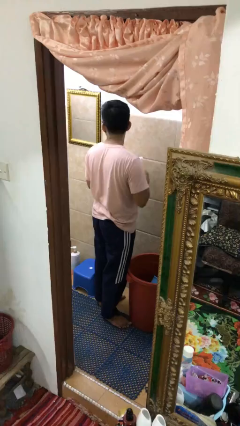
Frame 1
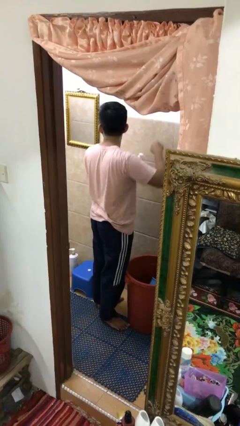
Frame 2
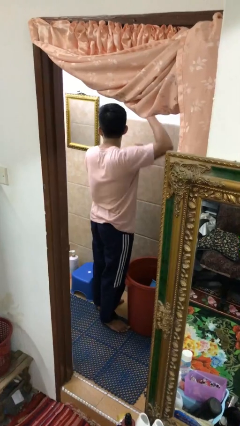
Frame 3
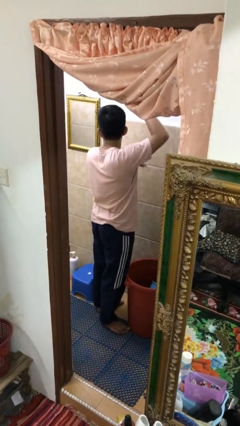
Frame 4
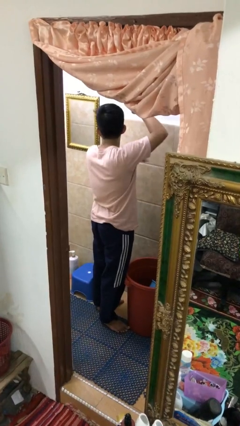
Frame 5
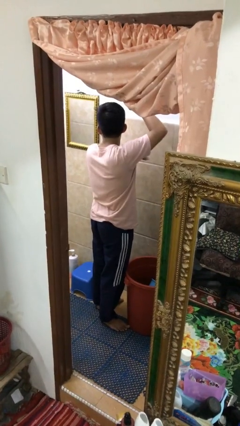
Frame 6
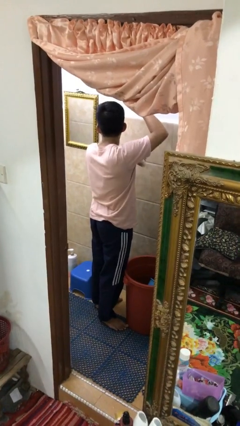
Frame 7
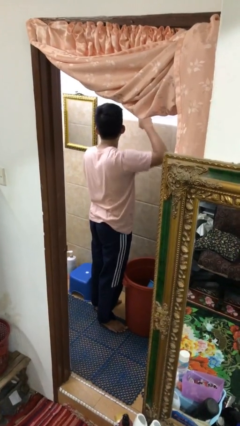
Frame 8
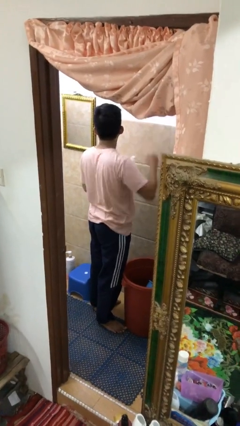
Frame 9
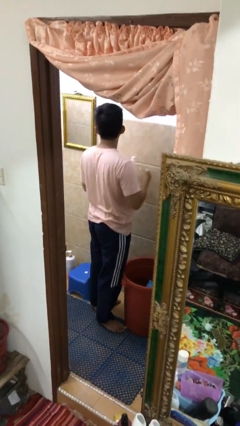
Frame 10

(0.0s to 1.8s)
person applies deodorant

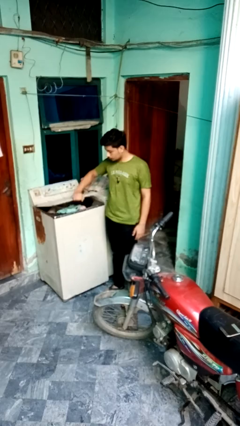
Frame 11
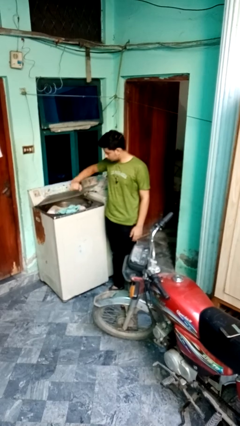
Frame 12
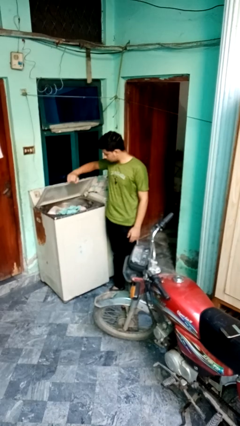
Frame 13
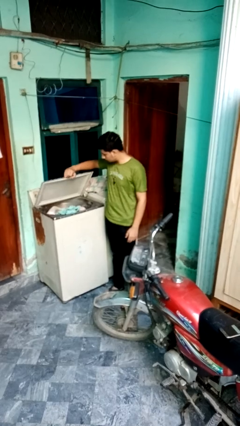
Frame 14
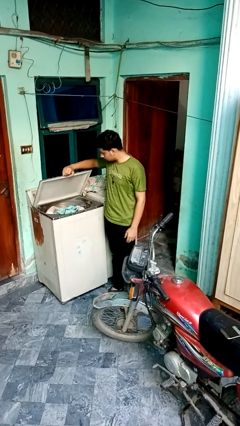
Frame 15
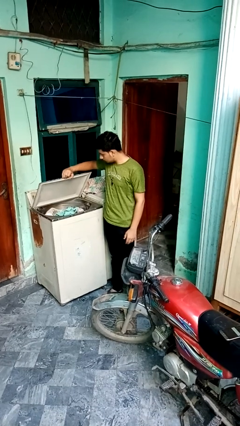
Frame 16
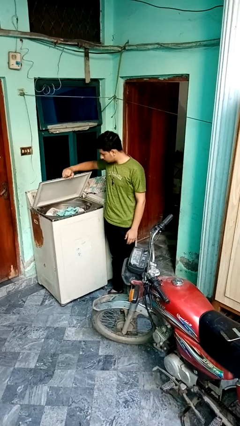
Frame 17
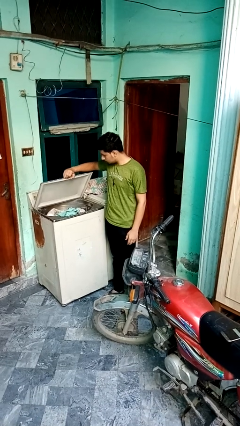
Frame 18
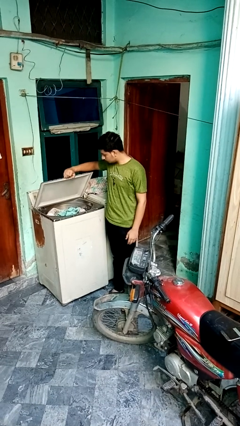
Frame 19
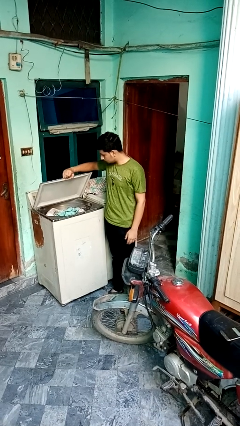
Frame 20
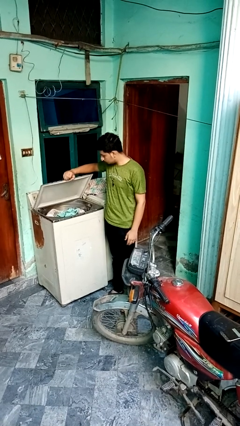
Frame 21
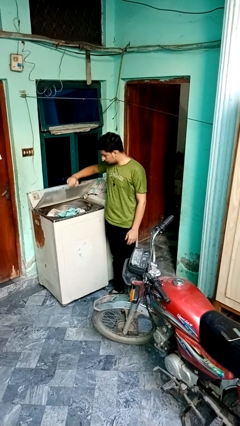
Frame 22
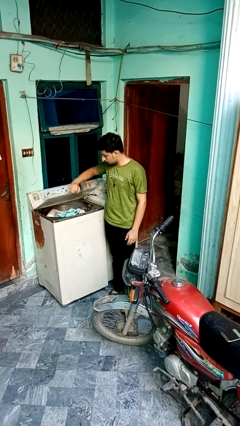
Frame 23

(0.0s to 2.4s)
person opens clothes washer

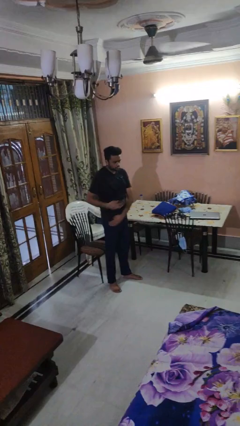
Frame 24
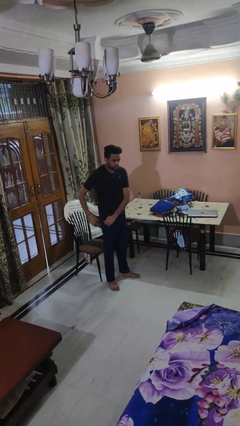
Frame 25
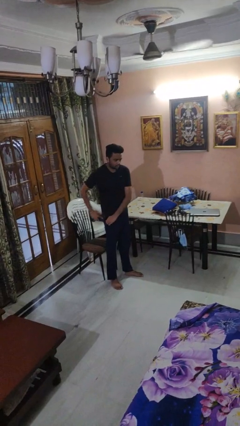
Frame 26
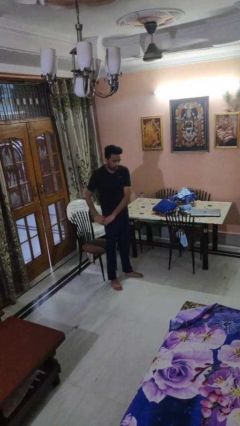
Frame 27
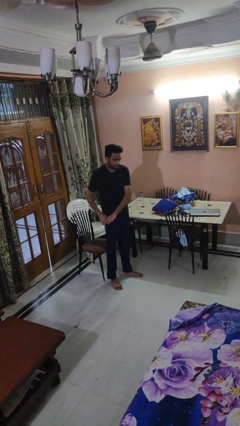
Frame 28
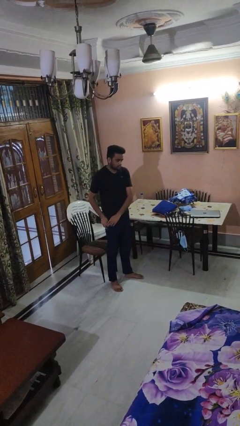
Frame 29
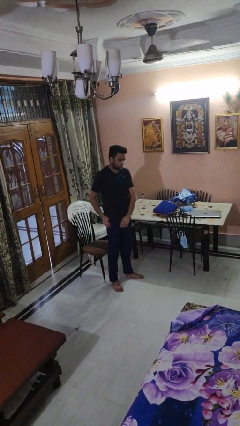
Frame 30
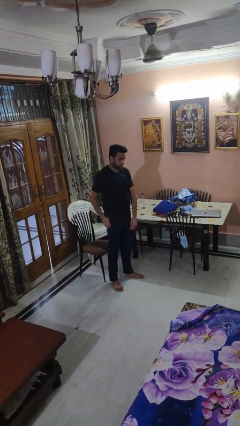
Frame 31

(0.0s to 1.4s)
person puts phone into pocket

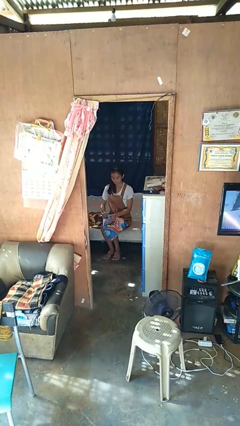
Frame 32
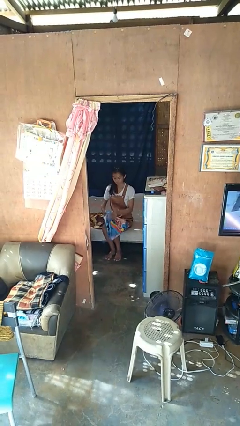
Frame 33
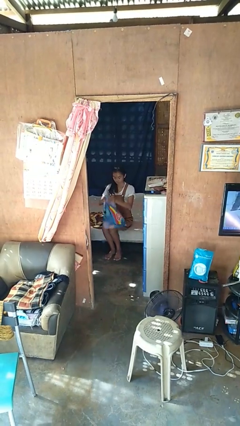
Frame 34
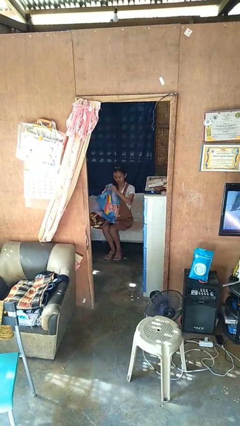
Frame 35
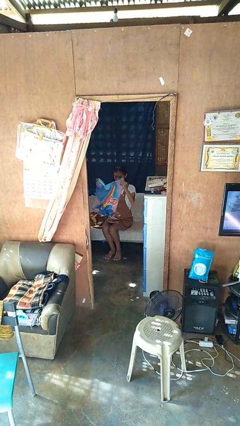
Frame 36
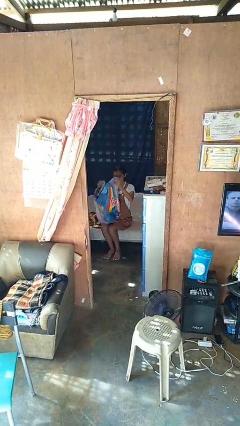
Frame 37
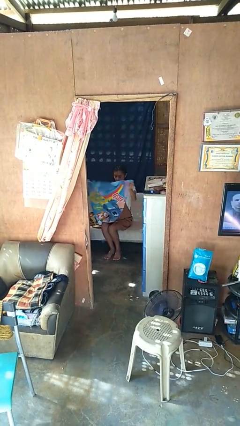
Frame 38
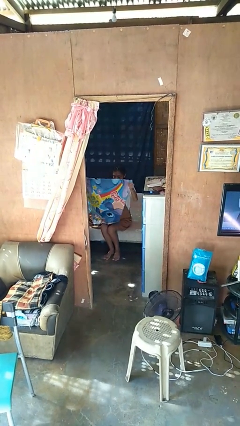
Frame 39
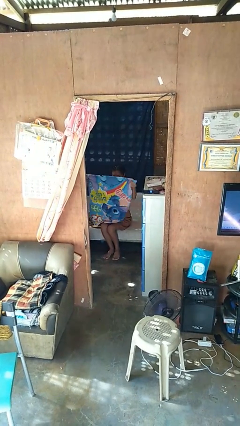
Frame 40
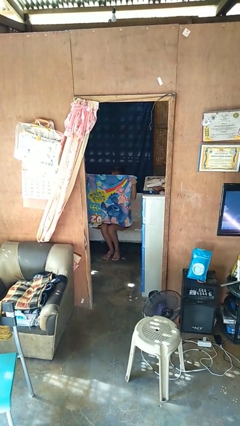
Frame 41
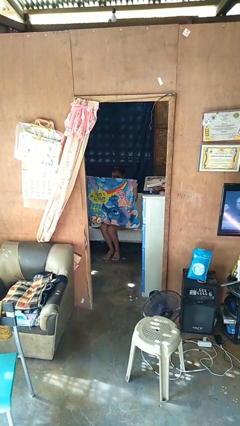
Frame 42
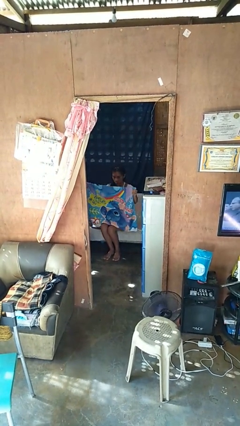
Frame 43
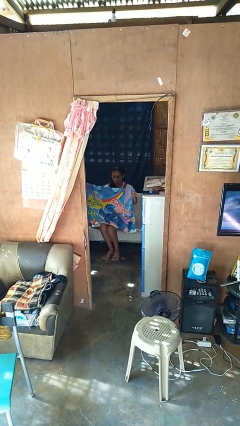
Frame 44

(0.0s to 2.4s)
person unfolds blanket

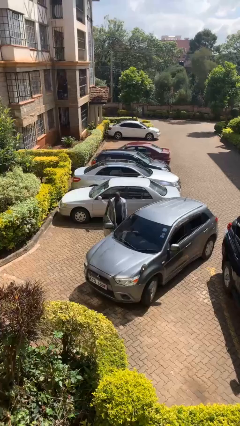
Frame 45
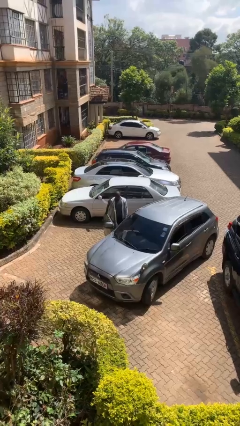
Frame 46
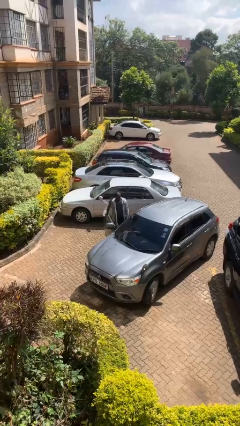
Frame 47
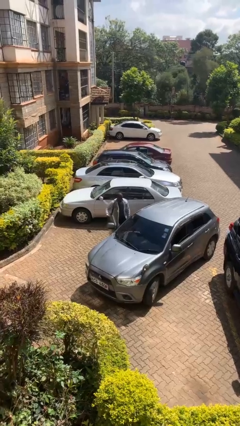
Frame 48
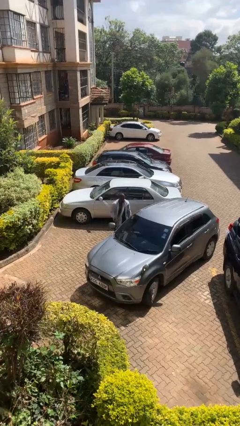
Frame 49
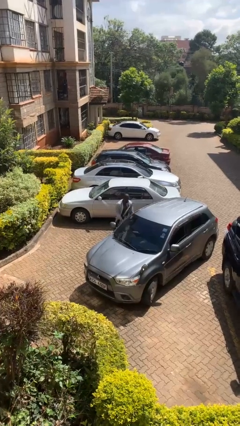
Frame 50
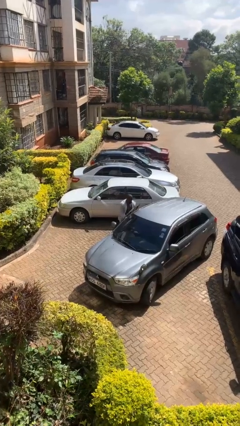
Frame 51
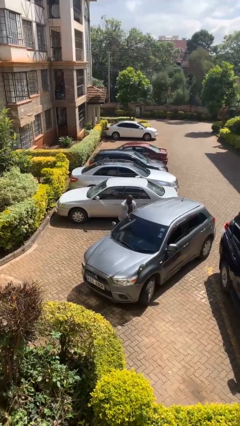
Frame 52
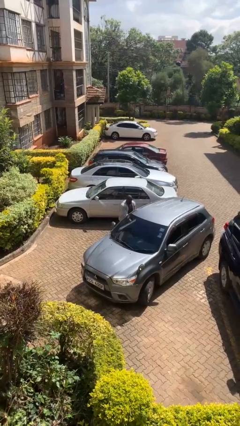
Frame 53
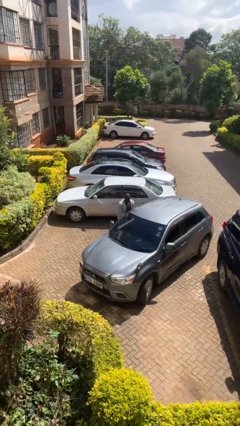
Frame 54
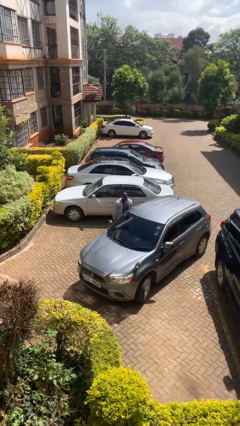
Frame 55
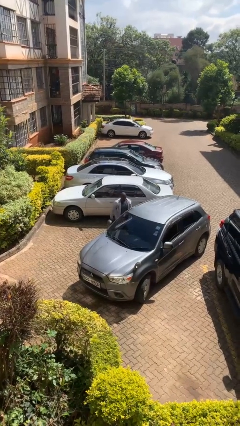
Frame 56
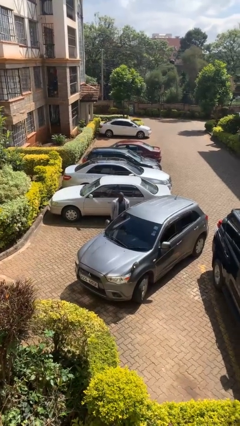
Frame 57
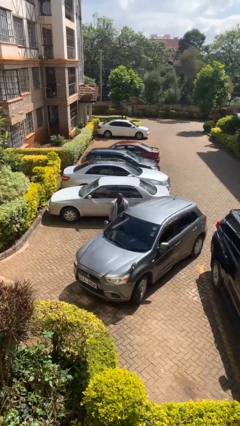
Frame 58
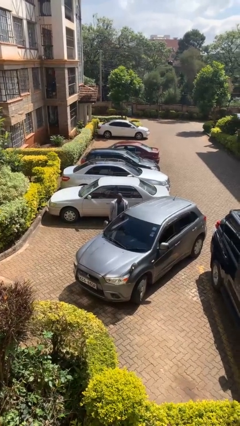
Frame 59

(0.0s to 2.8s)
person closes car door

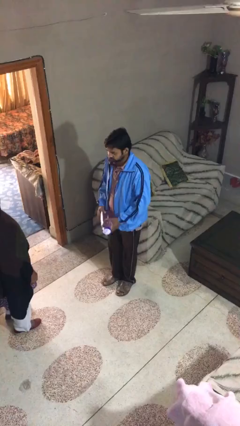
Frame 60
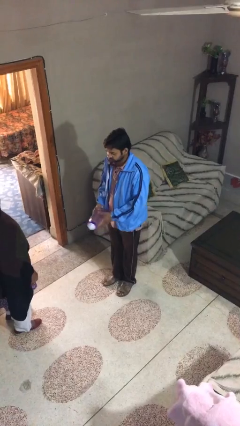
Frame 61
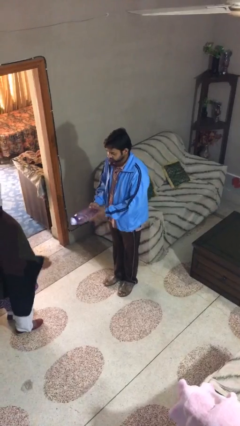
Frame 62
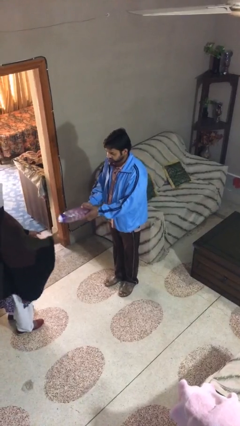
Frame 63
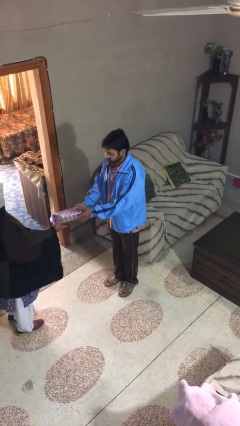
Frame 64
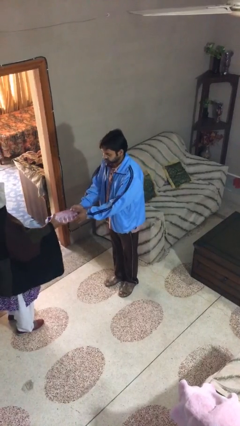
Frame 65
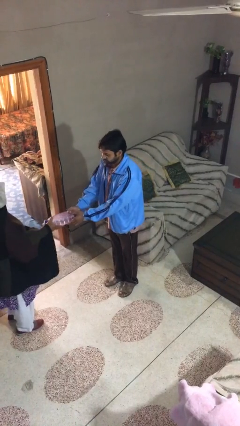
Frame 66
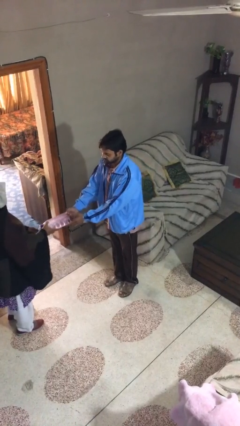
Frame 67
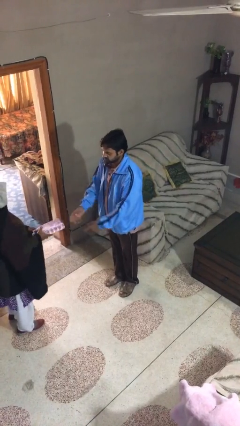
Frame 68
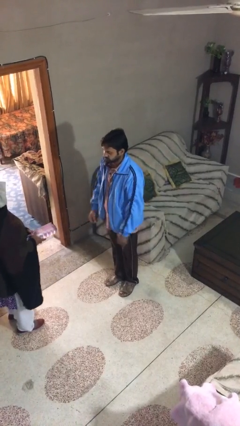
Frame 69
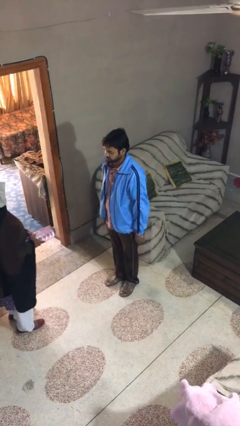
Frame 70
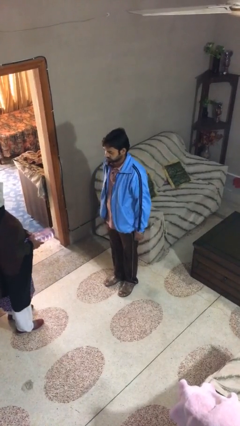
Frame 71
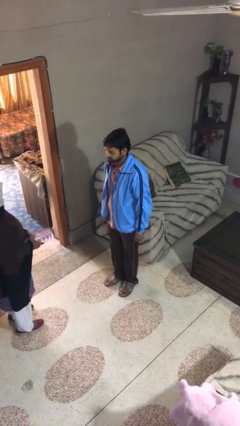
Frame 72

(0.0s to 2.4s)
person transfers object to person

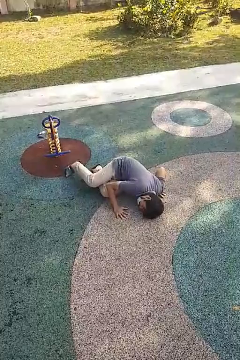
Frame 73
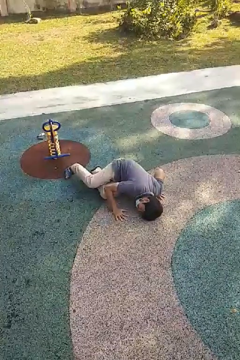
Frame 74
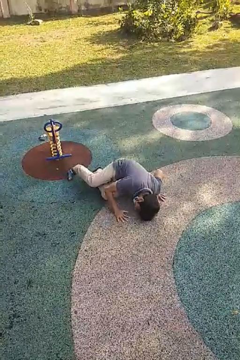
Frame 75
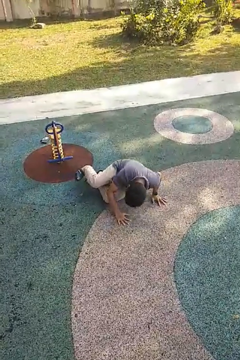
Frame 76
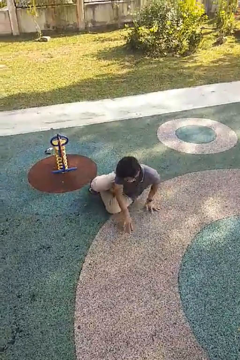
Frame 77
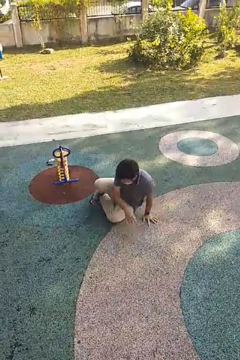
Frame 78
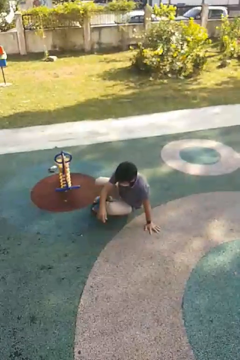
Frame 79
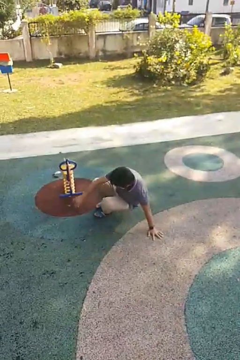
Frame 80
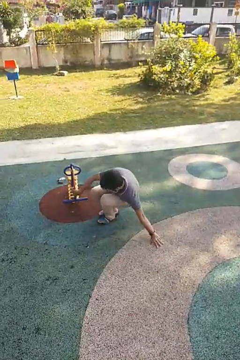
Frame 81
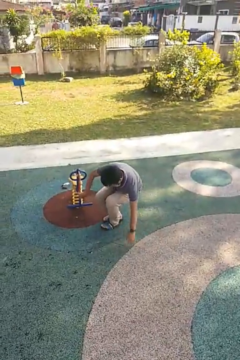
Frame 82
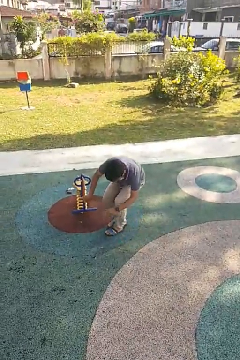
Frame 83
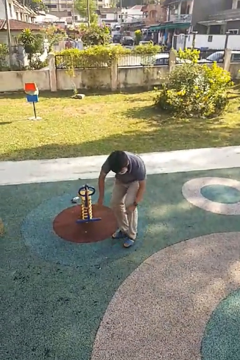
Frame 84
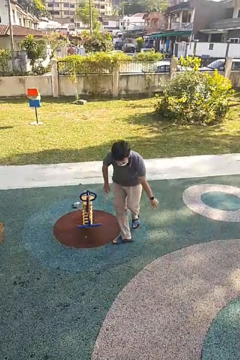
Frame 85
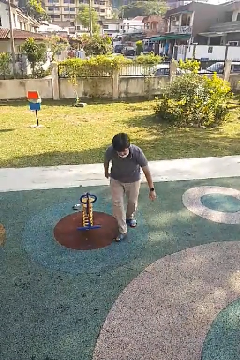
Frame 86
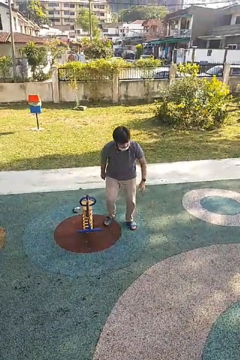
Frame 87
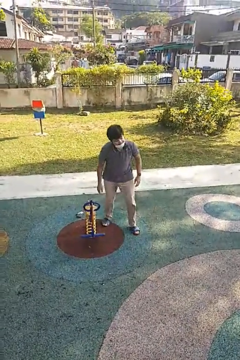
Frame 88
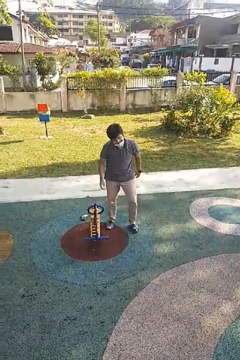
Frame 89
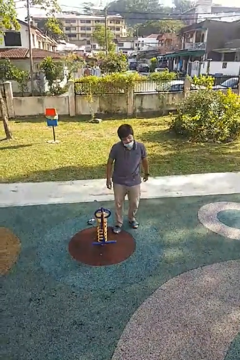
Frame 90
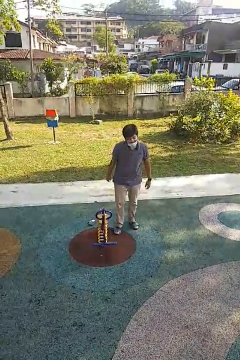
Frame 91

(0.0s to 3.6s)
person stands up from floor

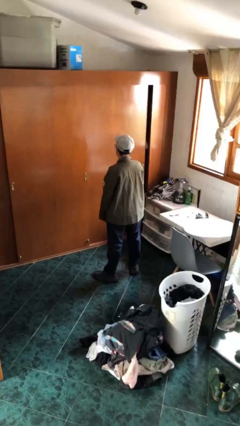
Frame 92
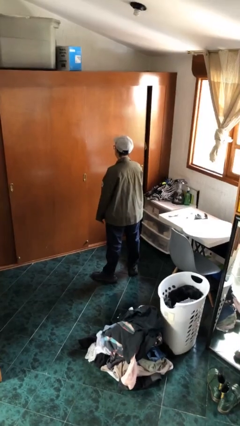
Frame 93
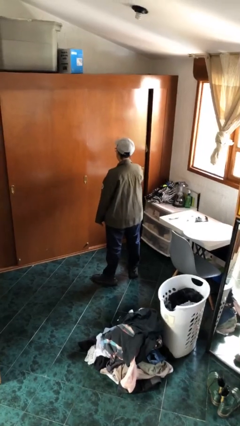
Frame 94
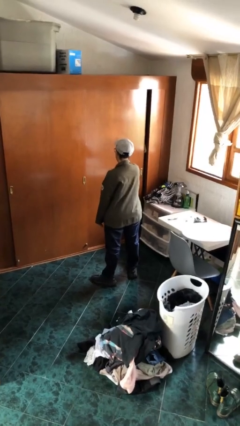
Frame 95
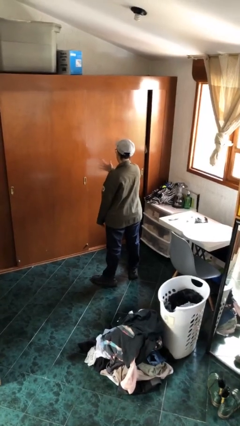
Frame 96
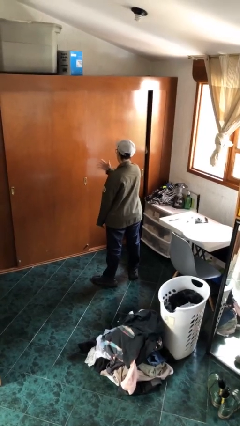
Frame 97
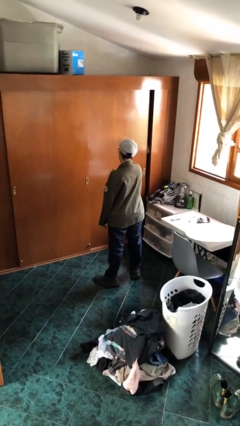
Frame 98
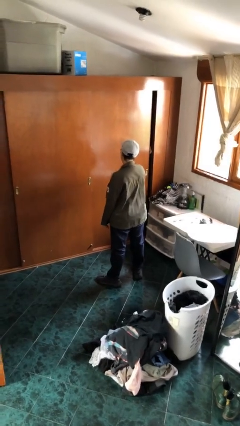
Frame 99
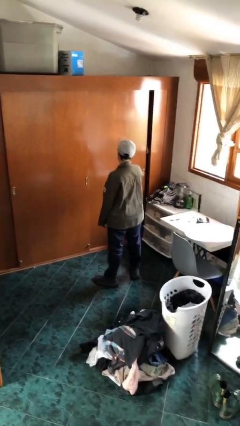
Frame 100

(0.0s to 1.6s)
person drums on chest
